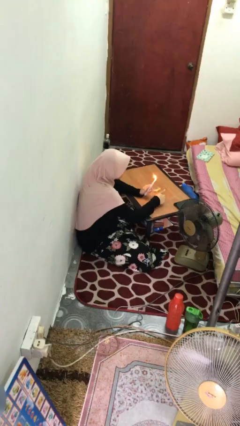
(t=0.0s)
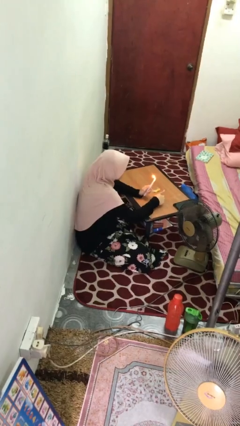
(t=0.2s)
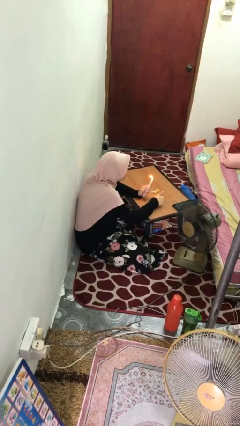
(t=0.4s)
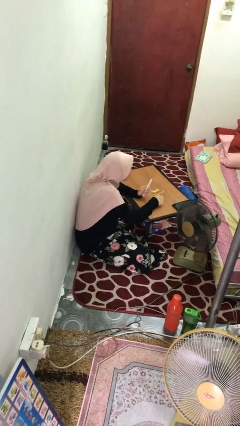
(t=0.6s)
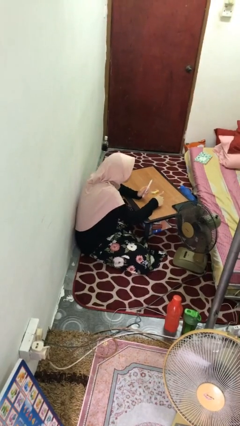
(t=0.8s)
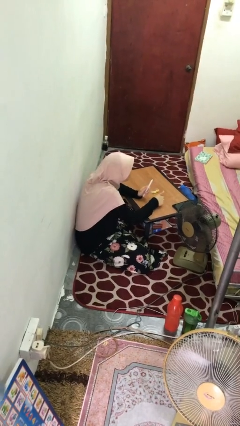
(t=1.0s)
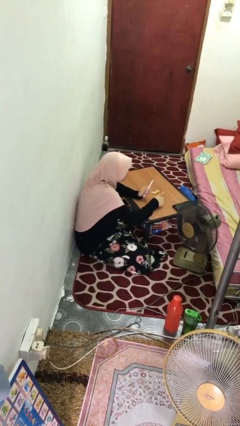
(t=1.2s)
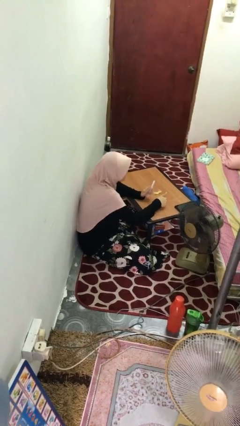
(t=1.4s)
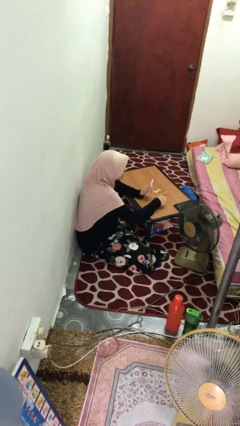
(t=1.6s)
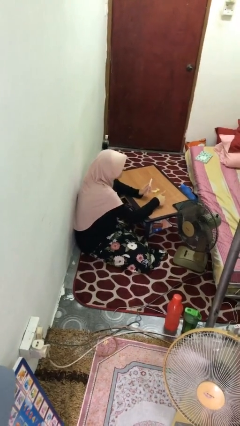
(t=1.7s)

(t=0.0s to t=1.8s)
person extinguishes candle

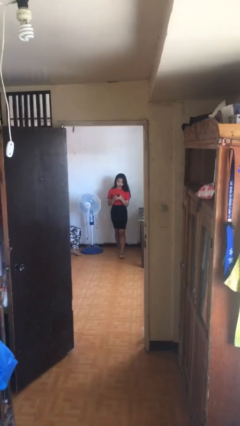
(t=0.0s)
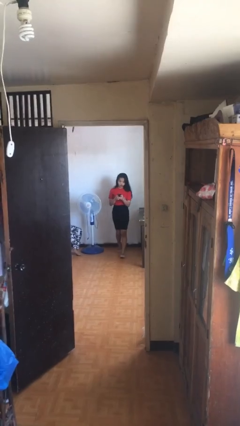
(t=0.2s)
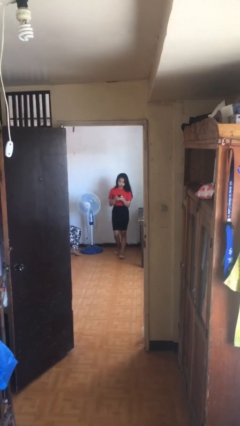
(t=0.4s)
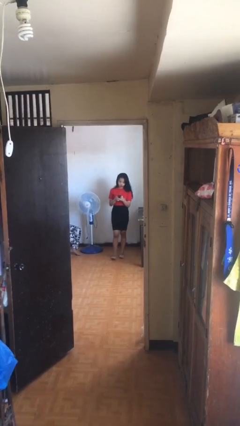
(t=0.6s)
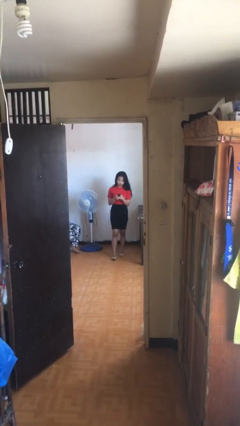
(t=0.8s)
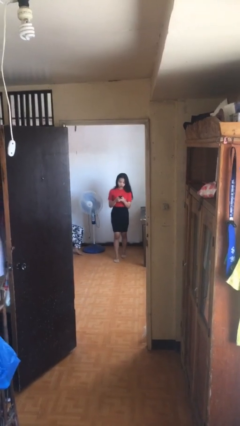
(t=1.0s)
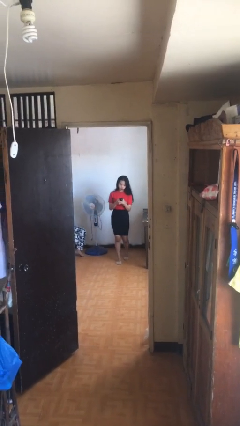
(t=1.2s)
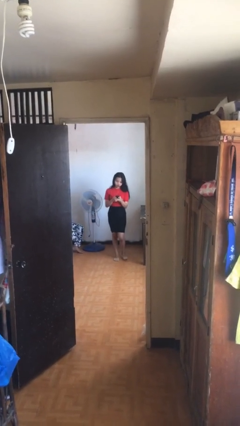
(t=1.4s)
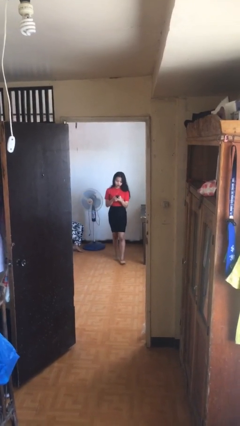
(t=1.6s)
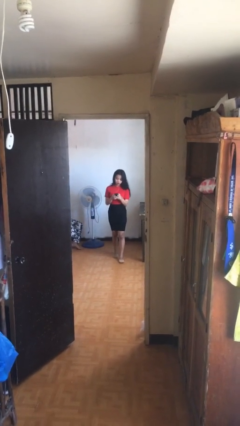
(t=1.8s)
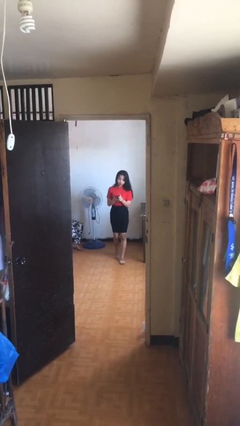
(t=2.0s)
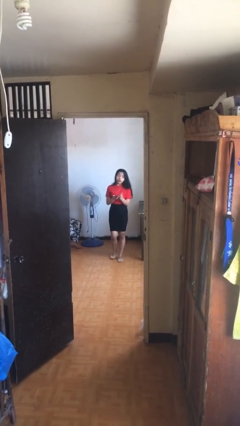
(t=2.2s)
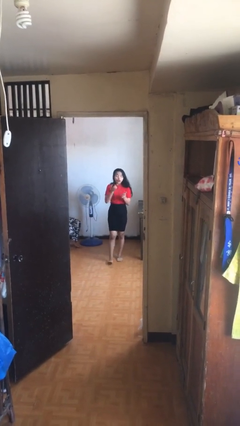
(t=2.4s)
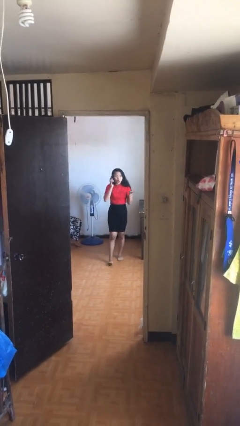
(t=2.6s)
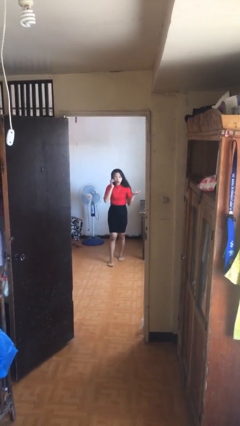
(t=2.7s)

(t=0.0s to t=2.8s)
person texts on phone

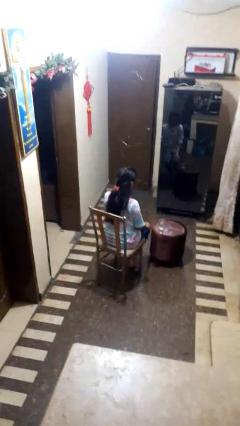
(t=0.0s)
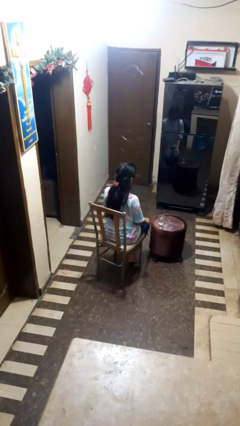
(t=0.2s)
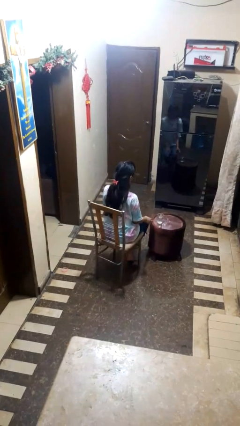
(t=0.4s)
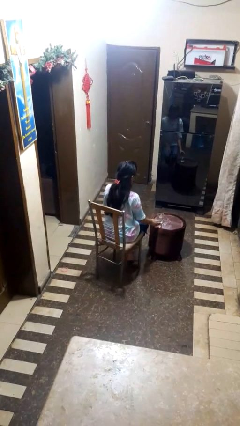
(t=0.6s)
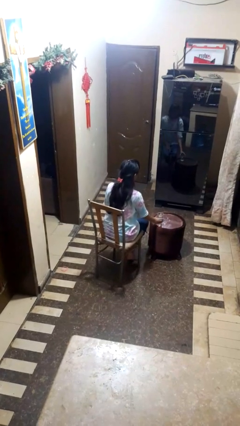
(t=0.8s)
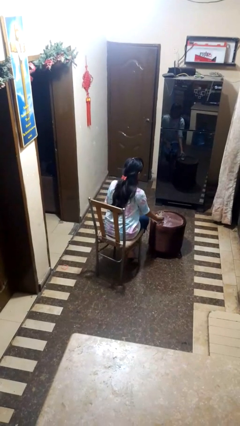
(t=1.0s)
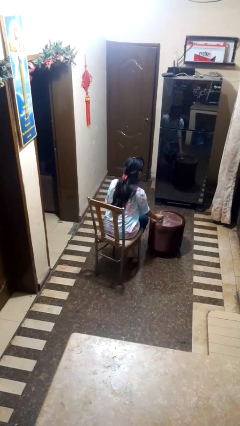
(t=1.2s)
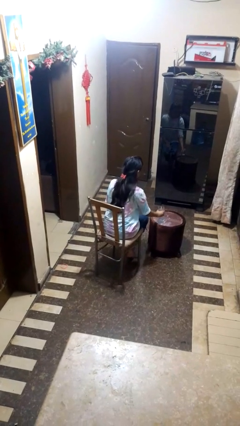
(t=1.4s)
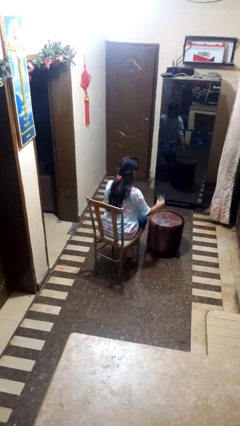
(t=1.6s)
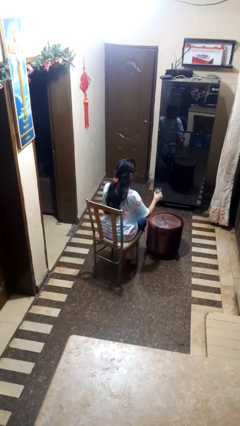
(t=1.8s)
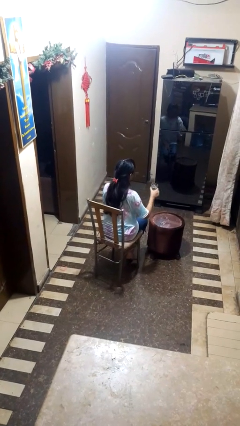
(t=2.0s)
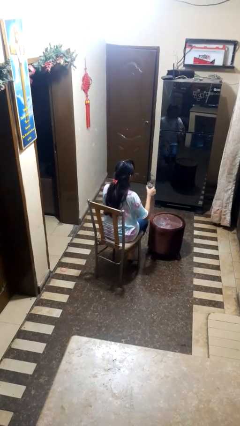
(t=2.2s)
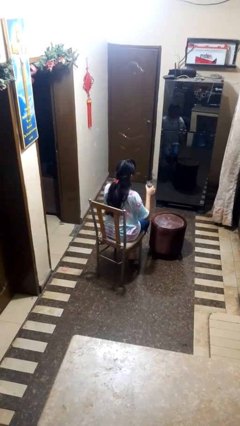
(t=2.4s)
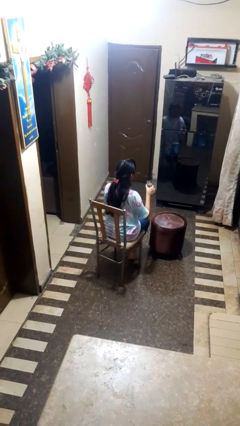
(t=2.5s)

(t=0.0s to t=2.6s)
person picks up object from table

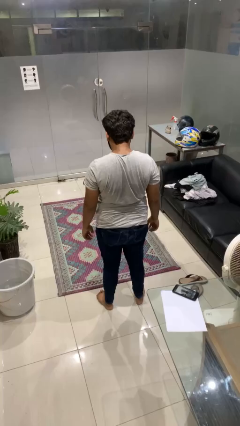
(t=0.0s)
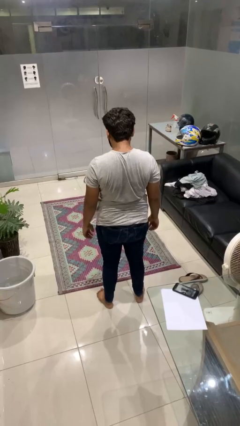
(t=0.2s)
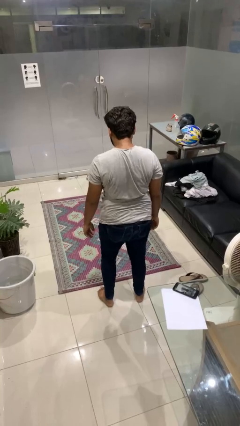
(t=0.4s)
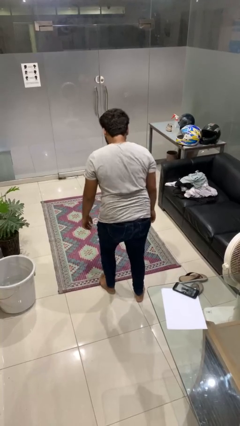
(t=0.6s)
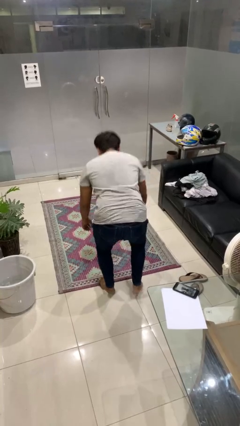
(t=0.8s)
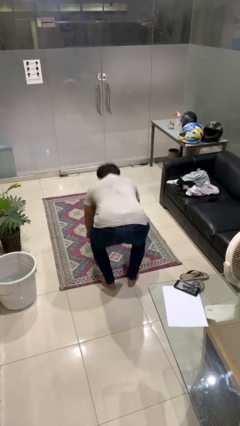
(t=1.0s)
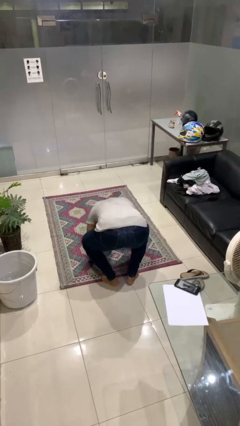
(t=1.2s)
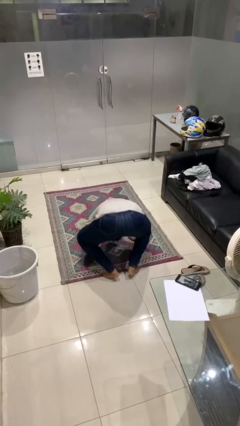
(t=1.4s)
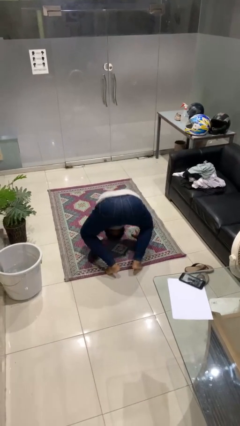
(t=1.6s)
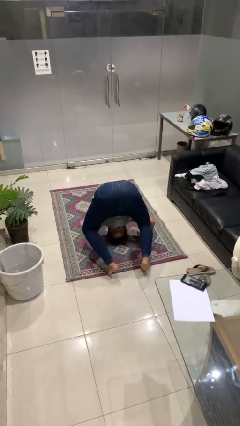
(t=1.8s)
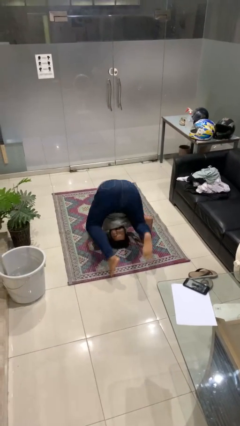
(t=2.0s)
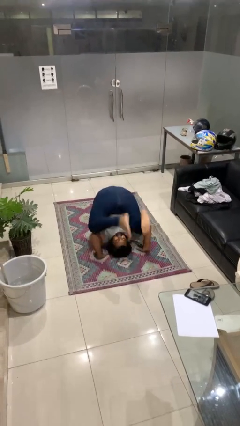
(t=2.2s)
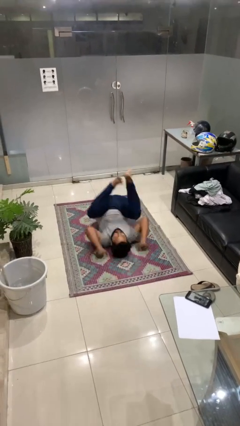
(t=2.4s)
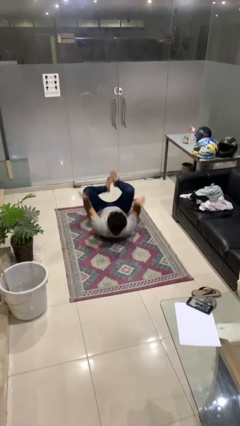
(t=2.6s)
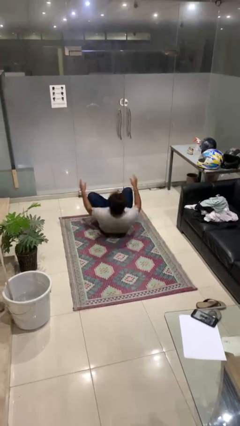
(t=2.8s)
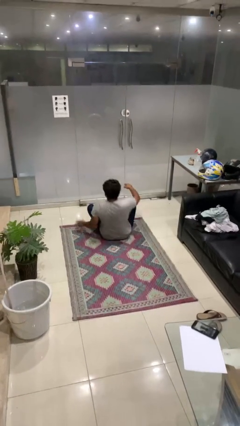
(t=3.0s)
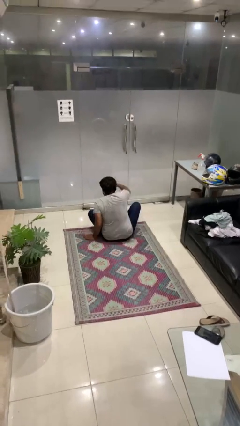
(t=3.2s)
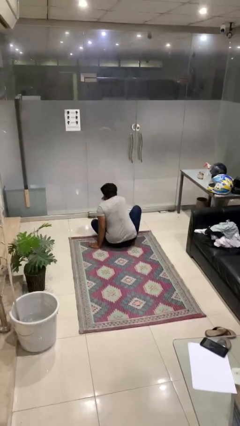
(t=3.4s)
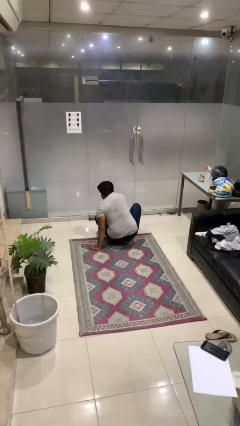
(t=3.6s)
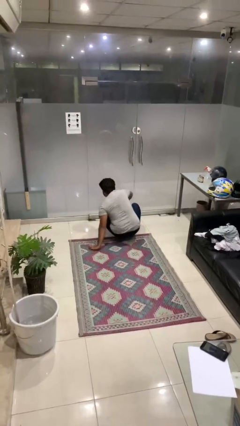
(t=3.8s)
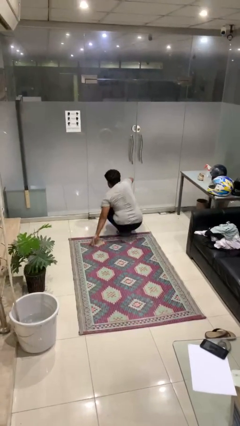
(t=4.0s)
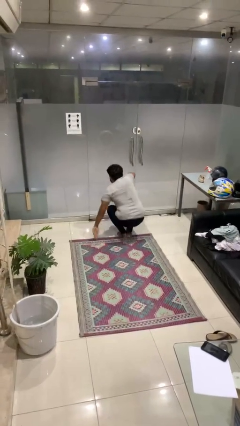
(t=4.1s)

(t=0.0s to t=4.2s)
person somersaults

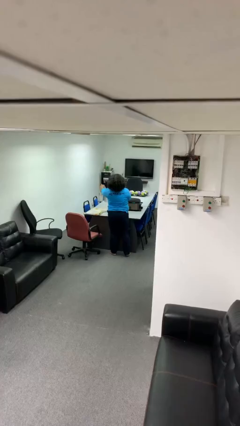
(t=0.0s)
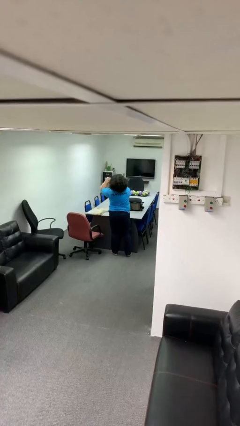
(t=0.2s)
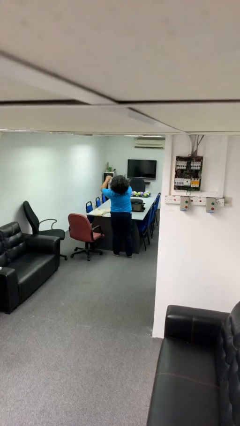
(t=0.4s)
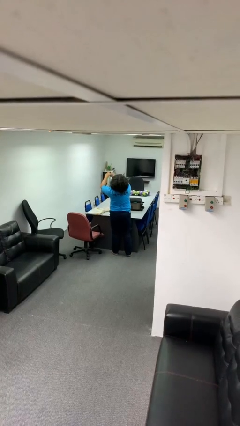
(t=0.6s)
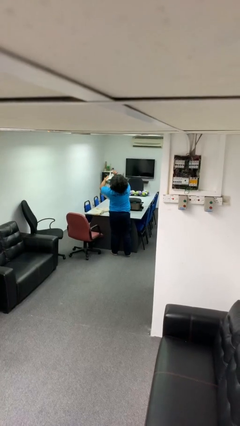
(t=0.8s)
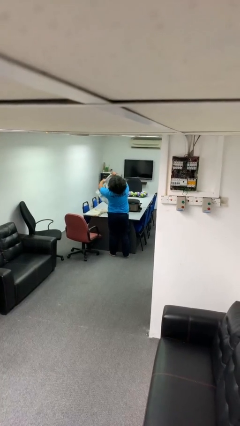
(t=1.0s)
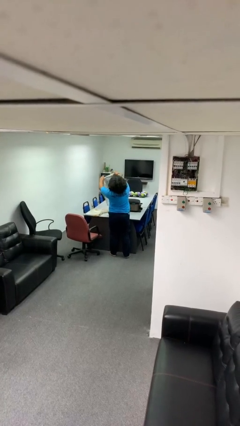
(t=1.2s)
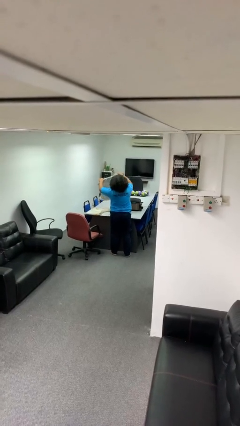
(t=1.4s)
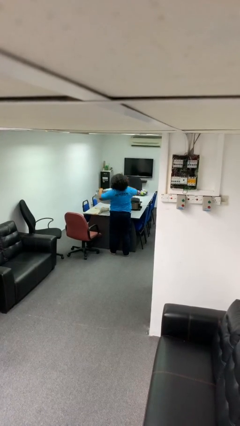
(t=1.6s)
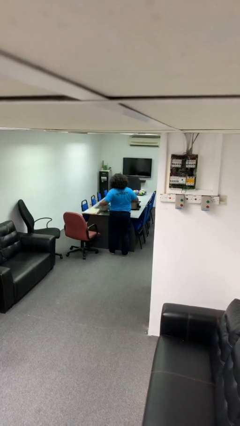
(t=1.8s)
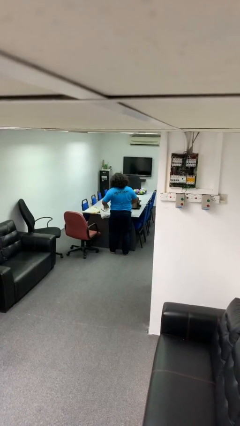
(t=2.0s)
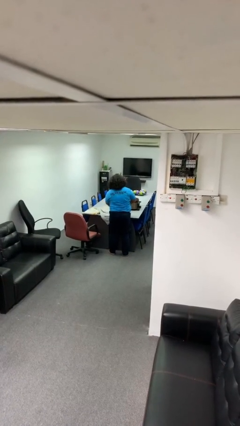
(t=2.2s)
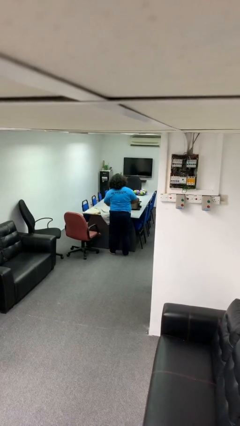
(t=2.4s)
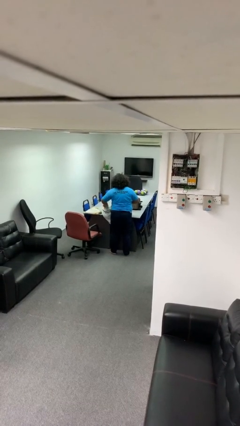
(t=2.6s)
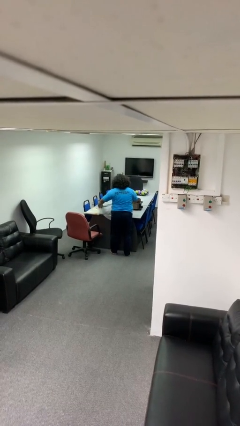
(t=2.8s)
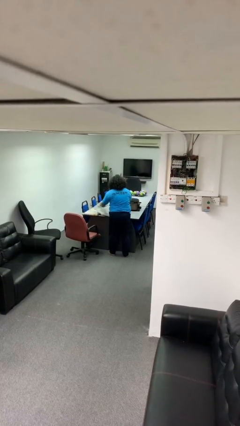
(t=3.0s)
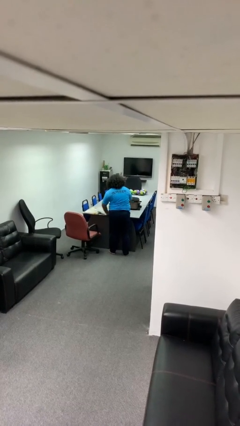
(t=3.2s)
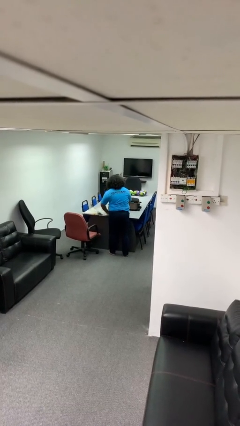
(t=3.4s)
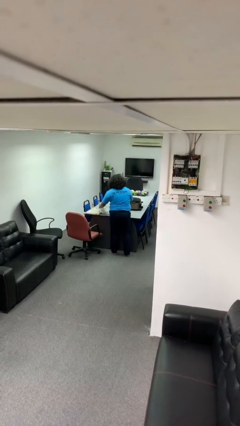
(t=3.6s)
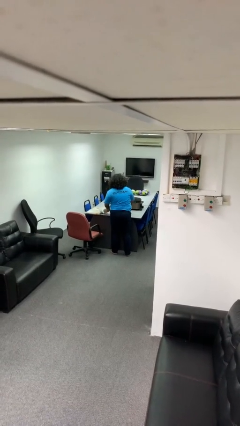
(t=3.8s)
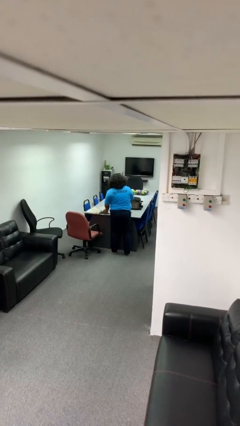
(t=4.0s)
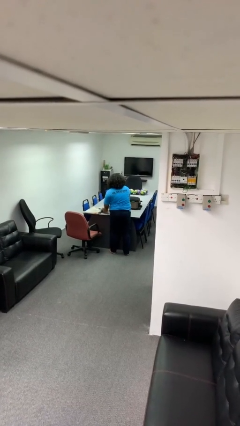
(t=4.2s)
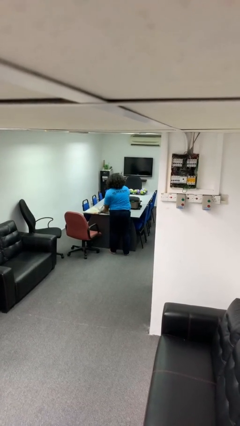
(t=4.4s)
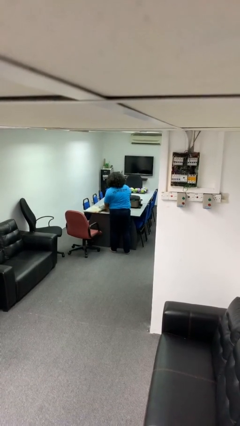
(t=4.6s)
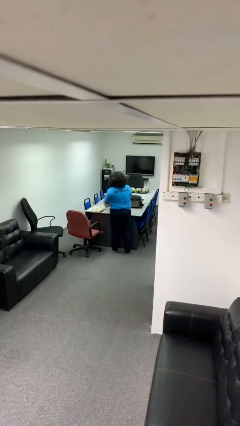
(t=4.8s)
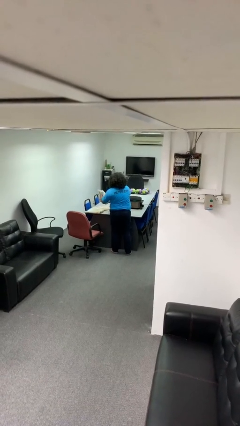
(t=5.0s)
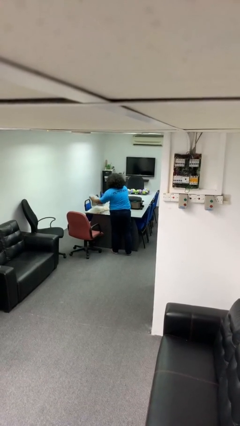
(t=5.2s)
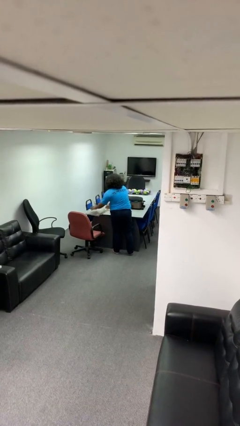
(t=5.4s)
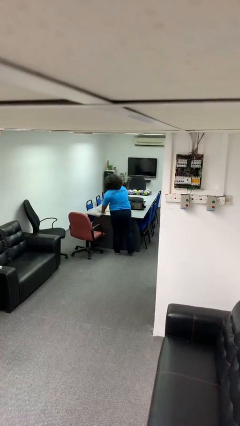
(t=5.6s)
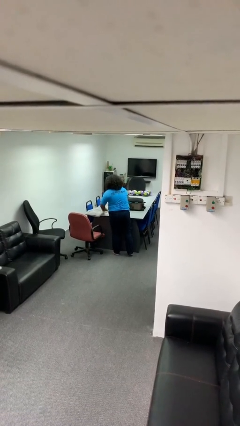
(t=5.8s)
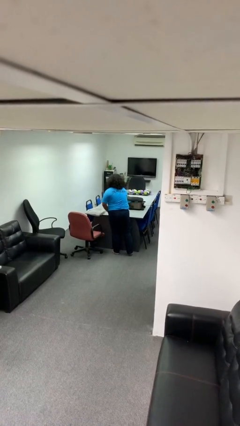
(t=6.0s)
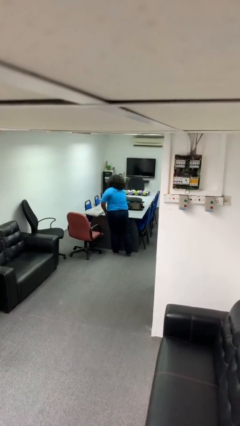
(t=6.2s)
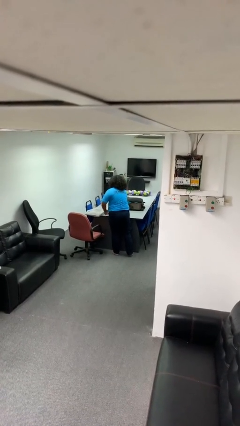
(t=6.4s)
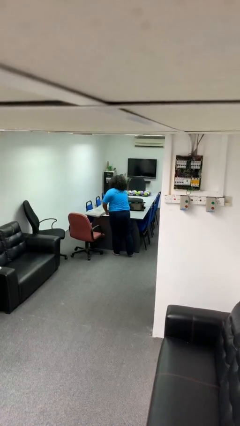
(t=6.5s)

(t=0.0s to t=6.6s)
person folds towel
